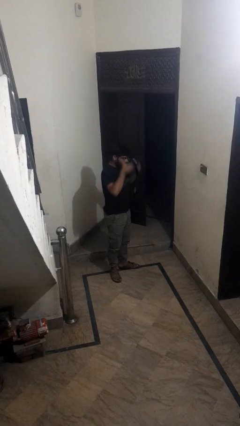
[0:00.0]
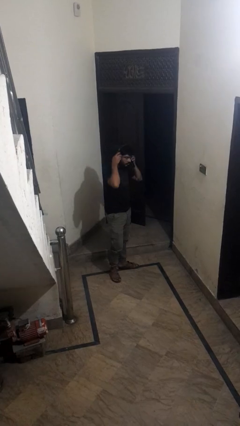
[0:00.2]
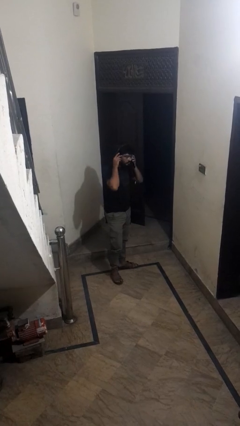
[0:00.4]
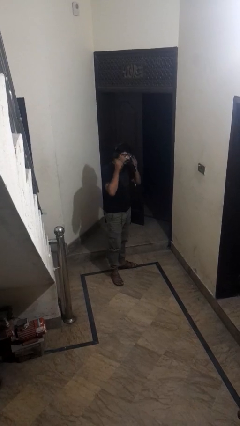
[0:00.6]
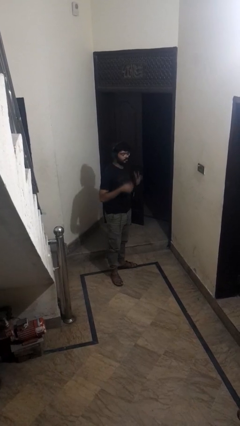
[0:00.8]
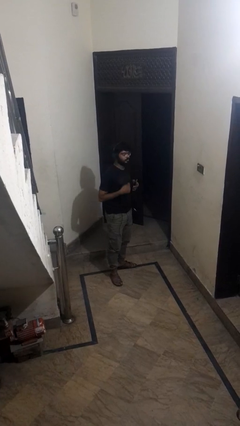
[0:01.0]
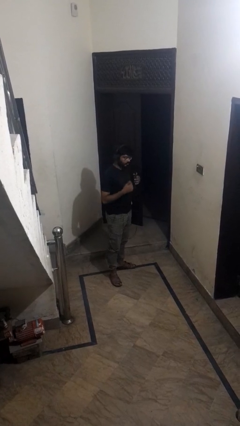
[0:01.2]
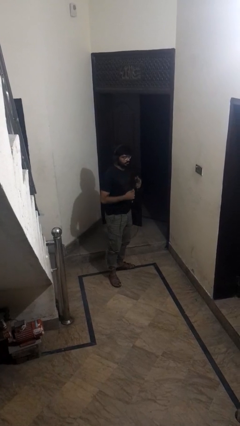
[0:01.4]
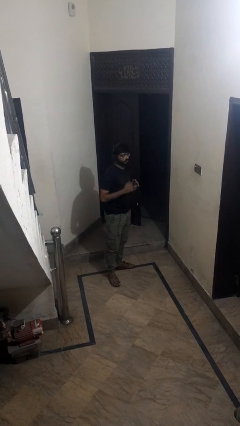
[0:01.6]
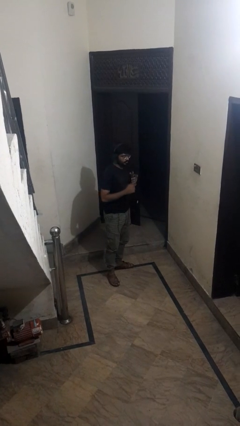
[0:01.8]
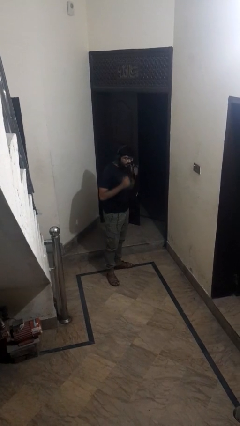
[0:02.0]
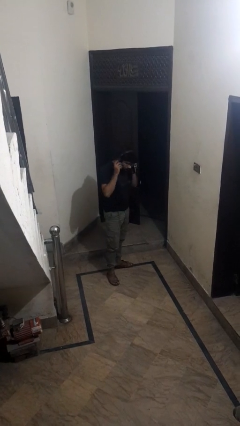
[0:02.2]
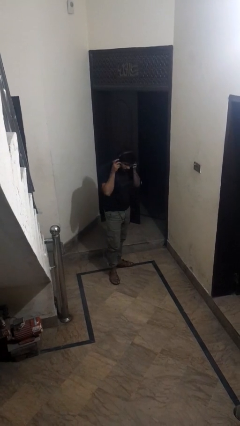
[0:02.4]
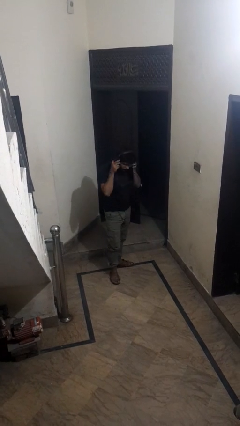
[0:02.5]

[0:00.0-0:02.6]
person puts on headphones

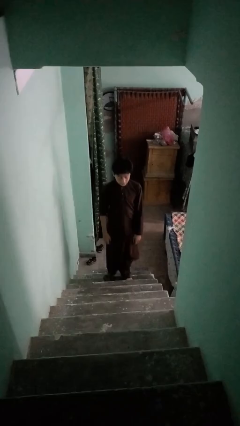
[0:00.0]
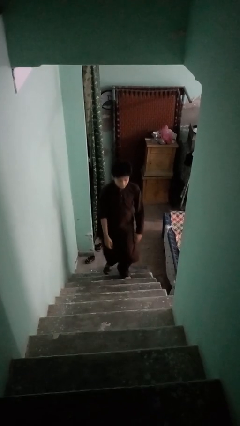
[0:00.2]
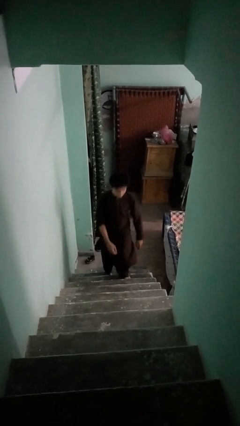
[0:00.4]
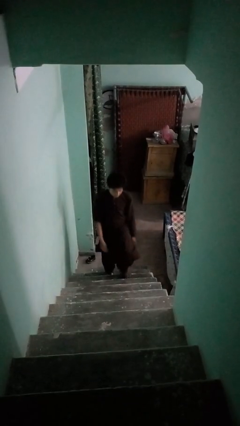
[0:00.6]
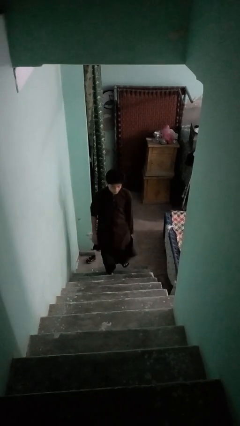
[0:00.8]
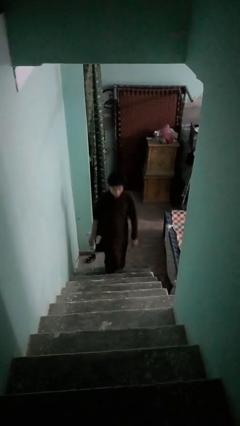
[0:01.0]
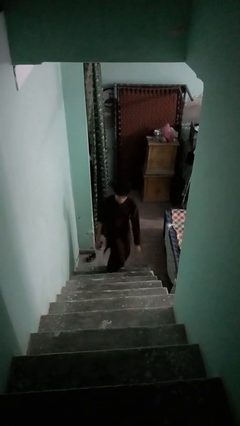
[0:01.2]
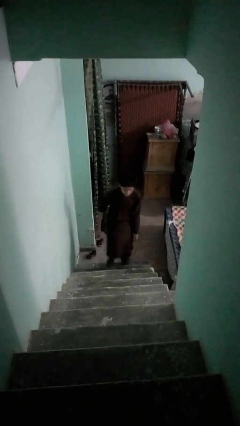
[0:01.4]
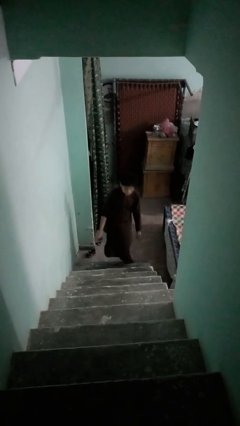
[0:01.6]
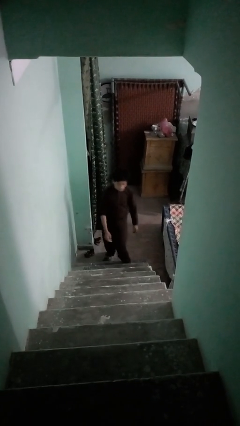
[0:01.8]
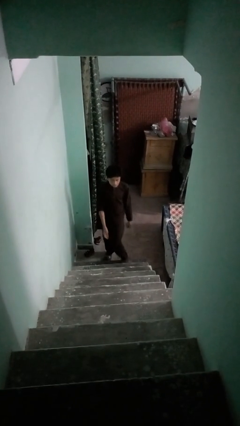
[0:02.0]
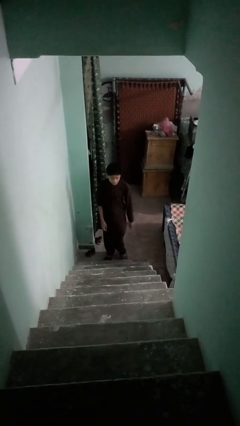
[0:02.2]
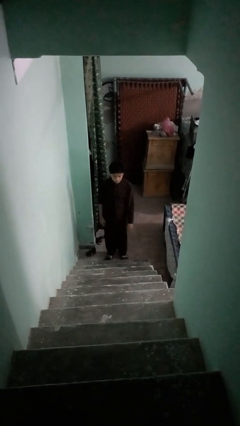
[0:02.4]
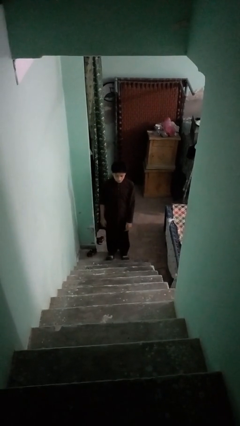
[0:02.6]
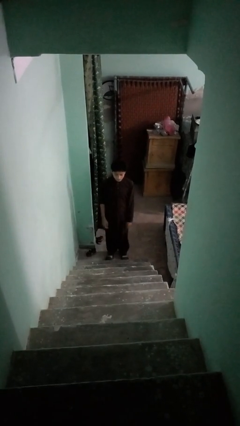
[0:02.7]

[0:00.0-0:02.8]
person climbs down stairs

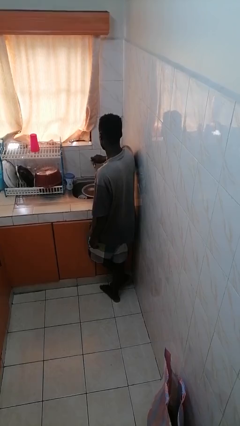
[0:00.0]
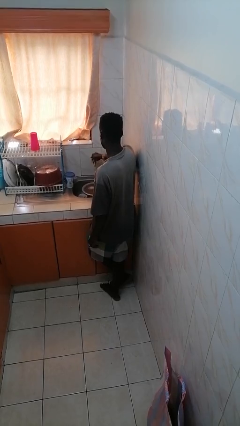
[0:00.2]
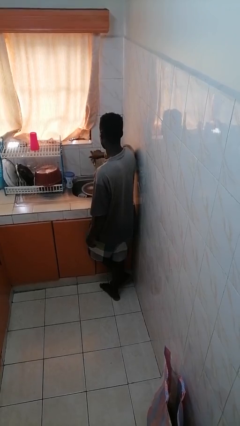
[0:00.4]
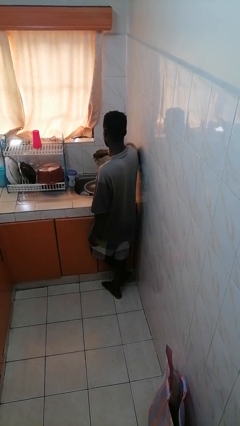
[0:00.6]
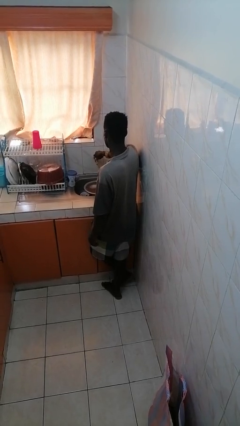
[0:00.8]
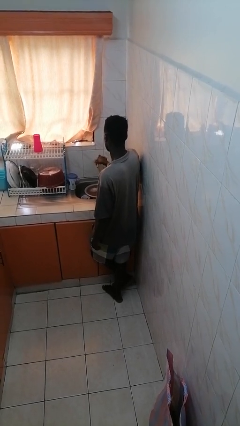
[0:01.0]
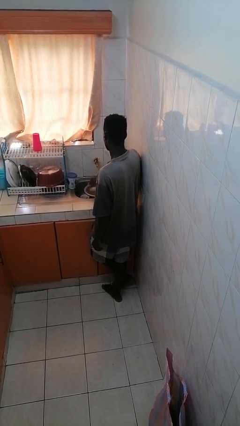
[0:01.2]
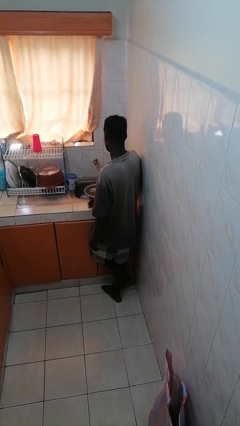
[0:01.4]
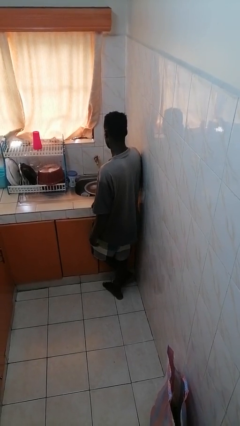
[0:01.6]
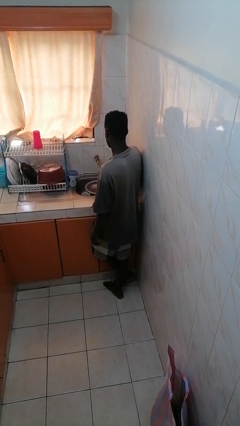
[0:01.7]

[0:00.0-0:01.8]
person turns off faucet

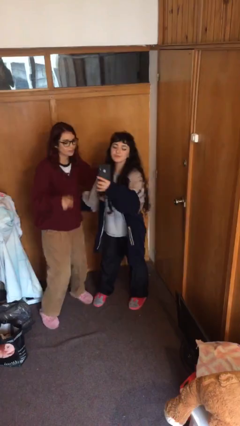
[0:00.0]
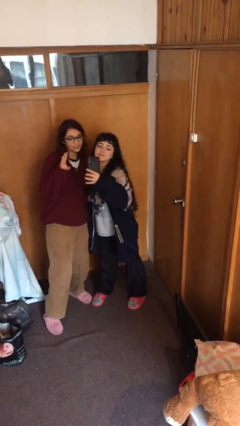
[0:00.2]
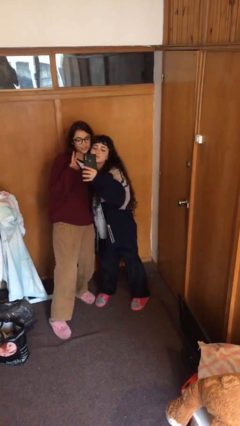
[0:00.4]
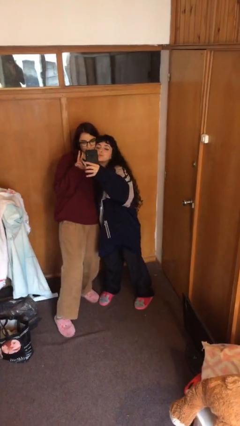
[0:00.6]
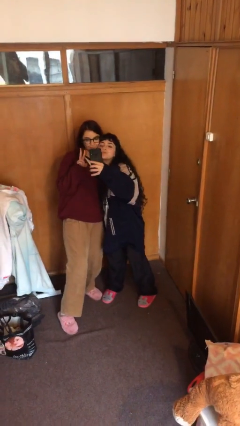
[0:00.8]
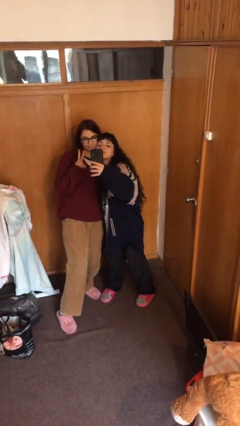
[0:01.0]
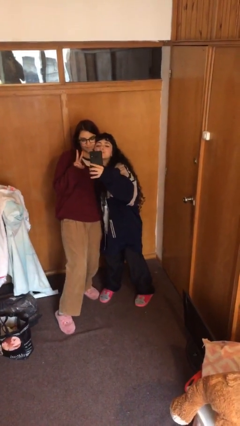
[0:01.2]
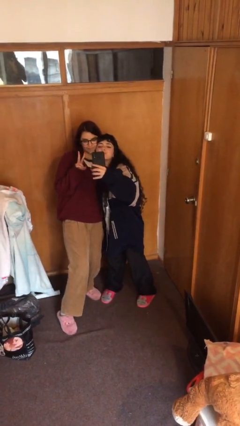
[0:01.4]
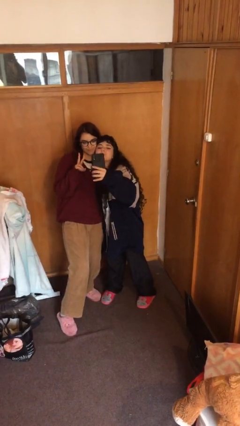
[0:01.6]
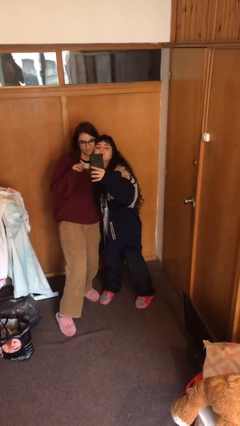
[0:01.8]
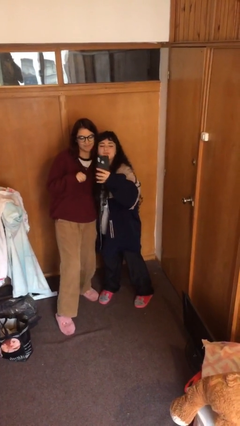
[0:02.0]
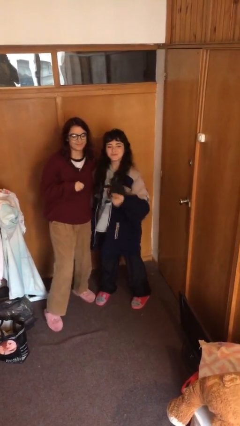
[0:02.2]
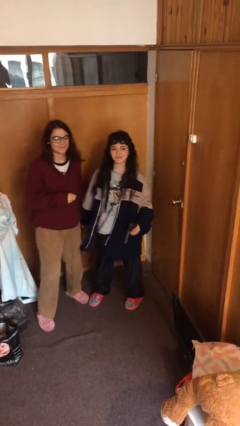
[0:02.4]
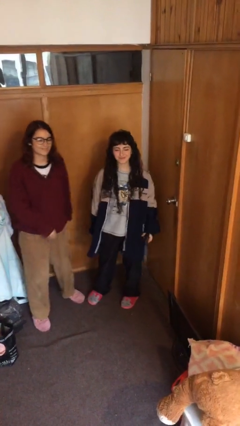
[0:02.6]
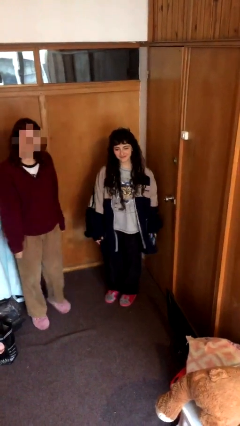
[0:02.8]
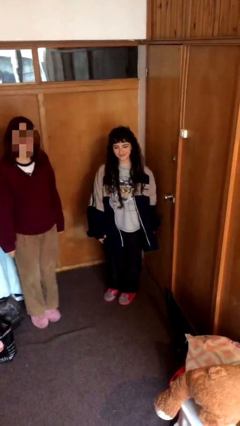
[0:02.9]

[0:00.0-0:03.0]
person takes selfie with person

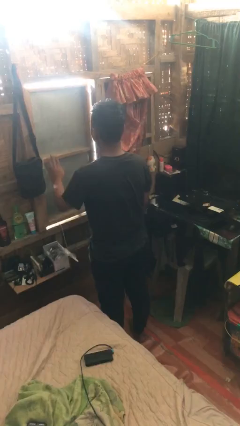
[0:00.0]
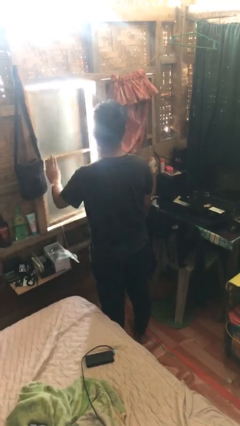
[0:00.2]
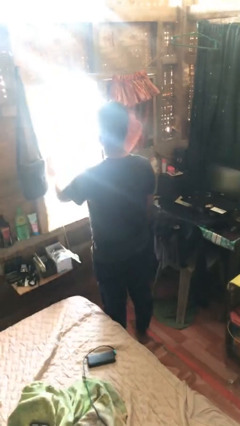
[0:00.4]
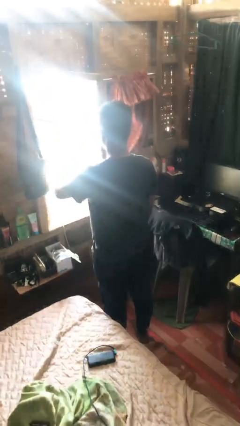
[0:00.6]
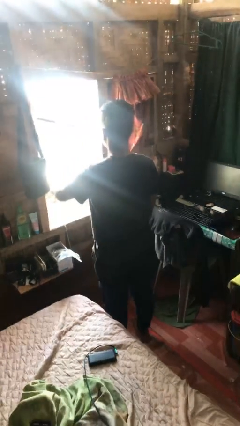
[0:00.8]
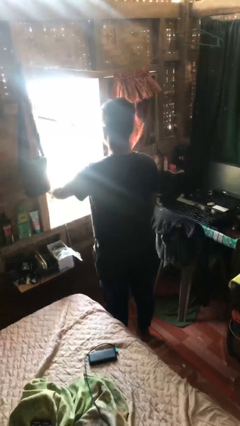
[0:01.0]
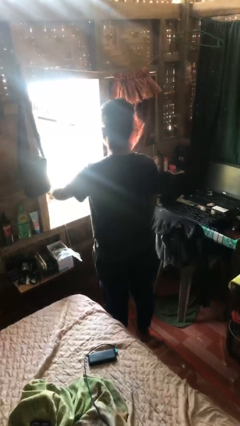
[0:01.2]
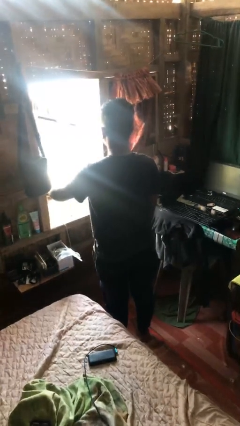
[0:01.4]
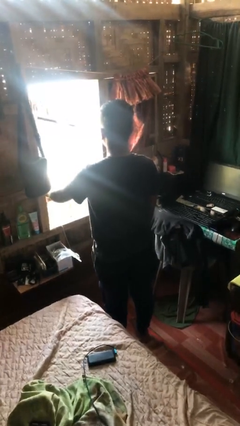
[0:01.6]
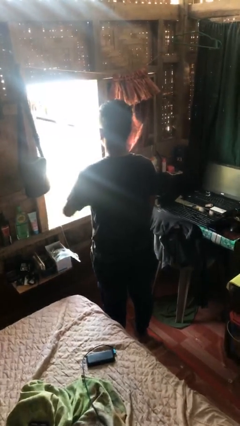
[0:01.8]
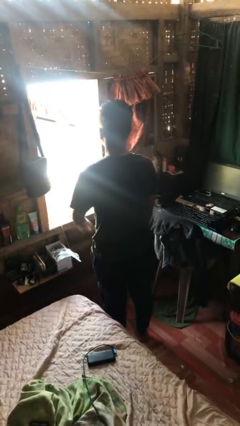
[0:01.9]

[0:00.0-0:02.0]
person opens home window

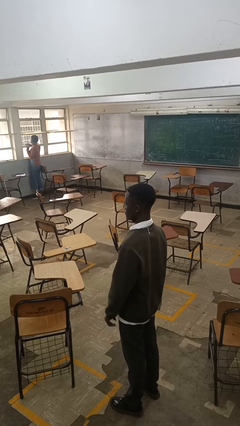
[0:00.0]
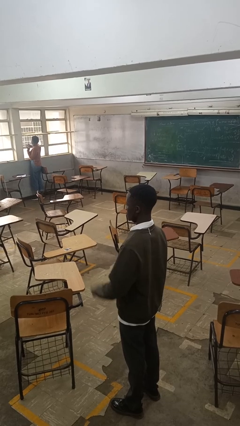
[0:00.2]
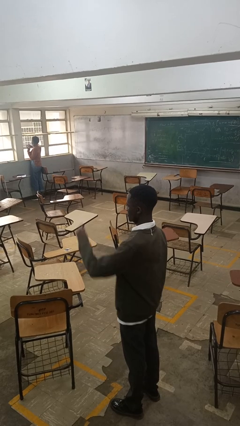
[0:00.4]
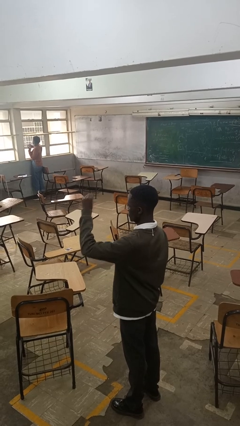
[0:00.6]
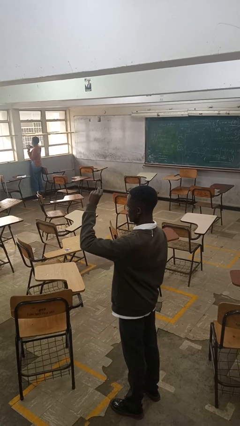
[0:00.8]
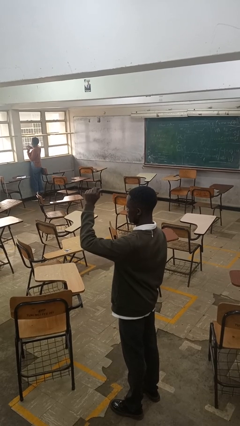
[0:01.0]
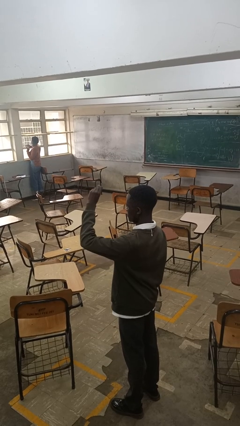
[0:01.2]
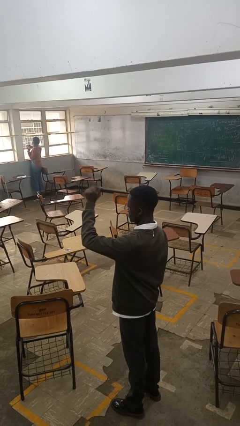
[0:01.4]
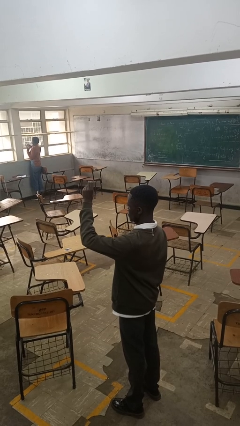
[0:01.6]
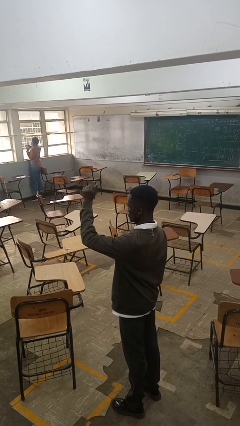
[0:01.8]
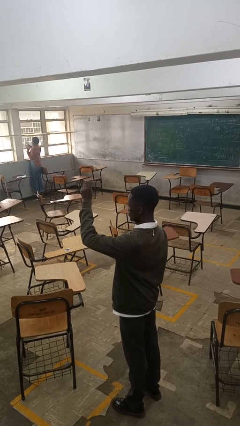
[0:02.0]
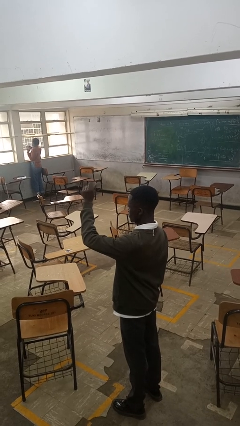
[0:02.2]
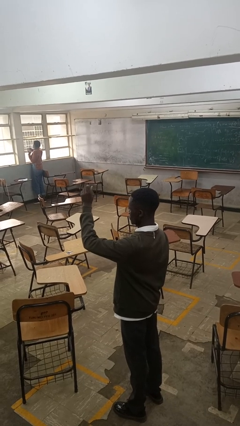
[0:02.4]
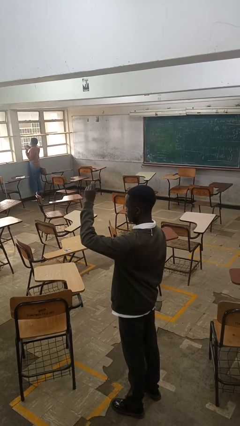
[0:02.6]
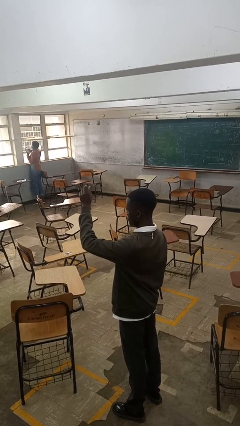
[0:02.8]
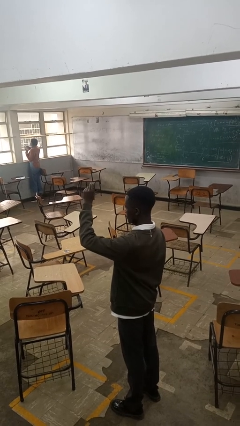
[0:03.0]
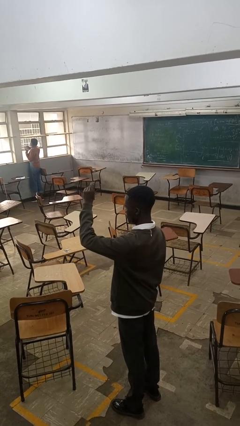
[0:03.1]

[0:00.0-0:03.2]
person snaps fingers

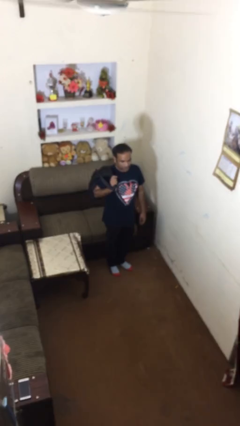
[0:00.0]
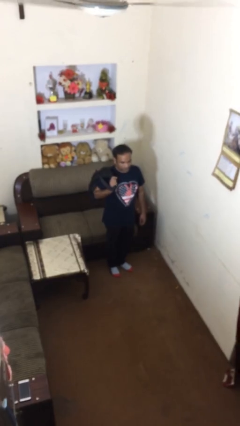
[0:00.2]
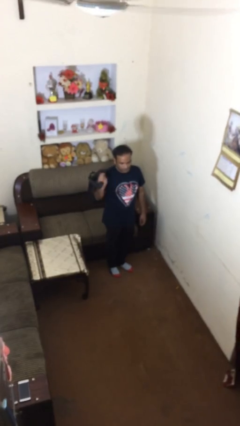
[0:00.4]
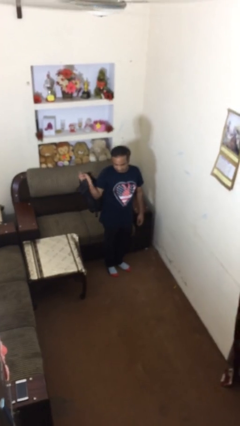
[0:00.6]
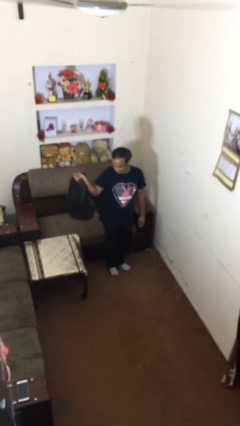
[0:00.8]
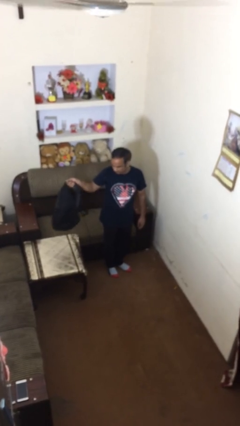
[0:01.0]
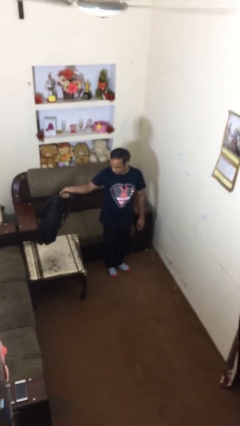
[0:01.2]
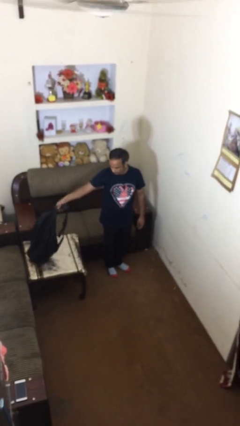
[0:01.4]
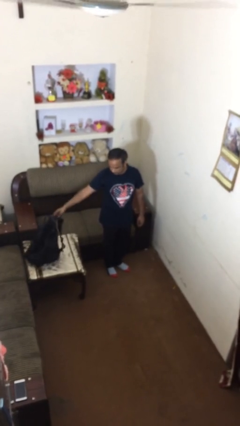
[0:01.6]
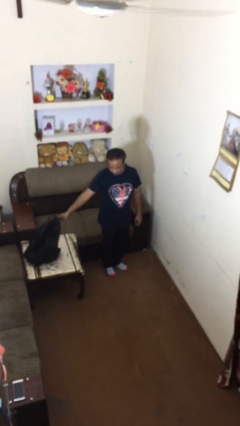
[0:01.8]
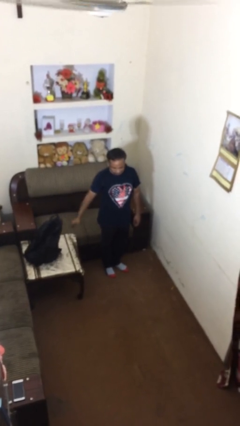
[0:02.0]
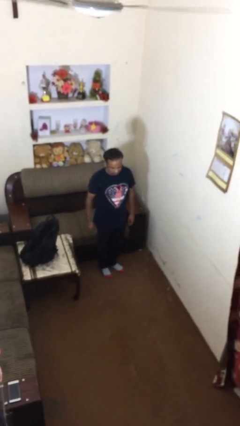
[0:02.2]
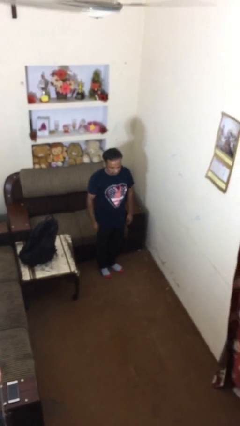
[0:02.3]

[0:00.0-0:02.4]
person puts down object on table
